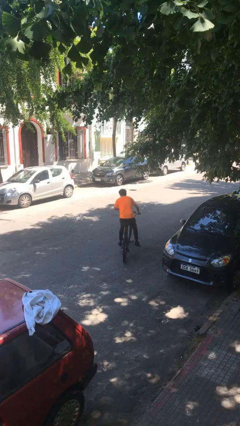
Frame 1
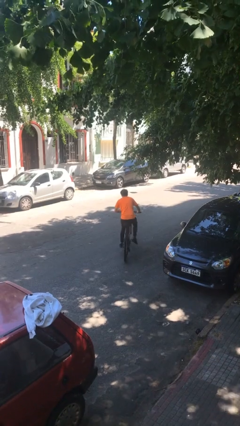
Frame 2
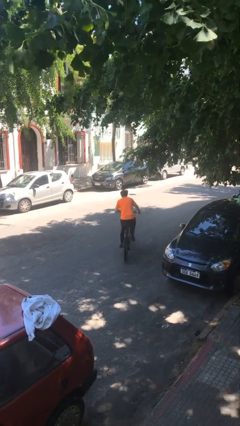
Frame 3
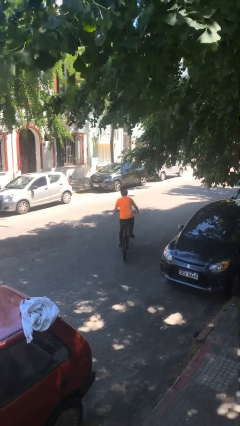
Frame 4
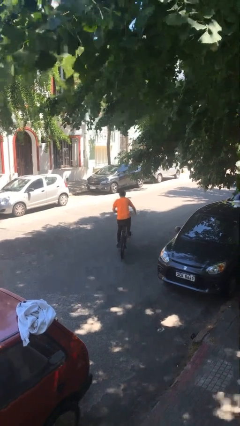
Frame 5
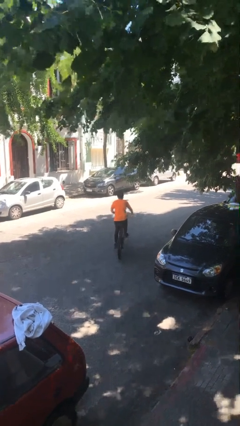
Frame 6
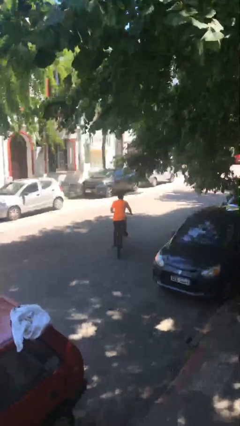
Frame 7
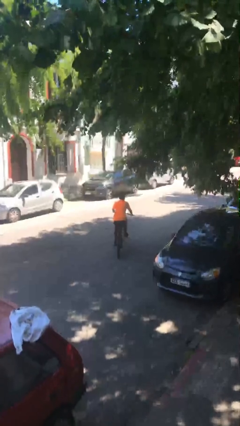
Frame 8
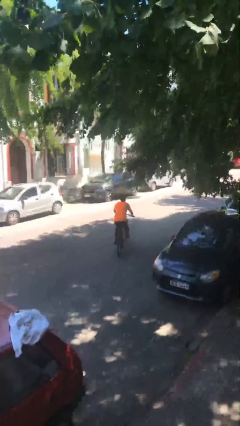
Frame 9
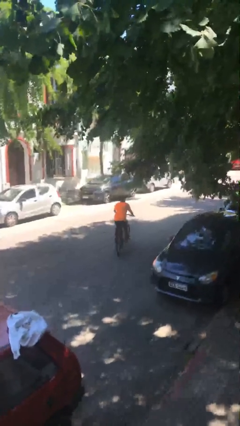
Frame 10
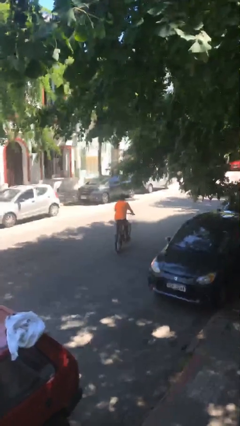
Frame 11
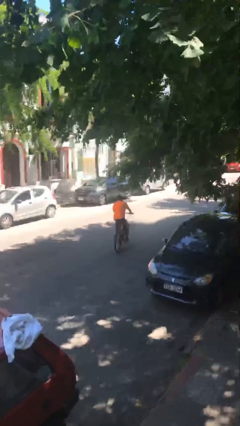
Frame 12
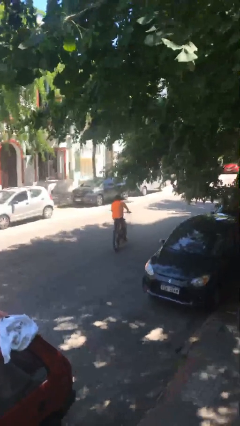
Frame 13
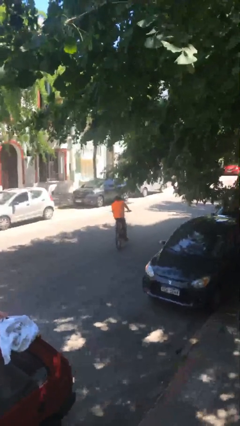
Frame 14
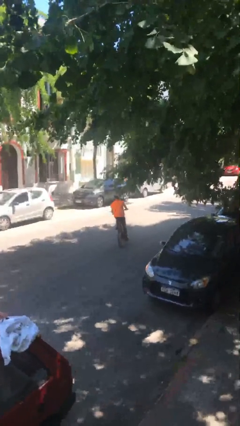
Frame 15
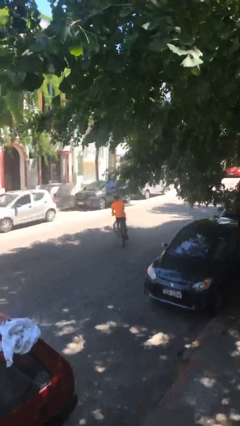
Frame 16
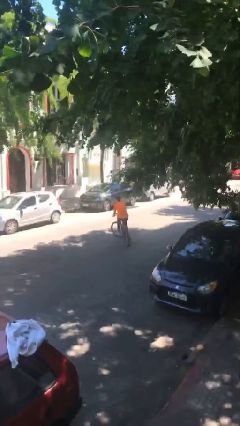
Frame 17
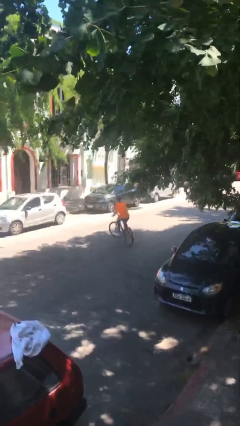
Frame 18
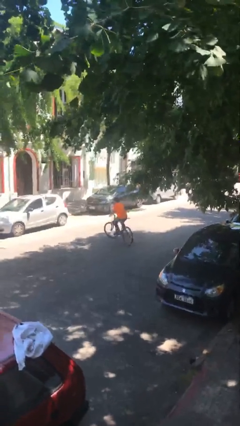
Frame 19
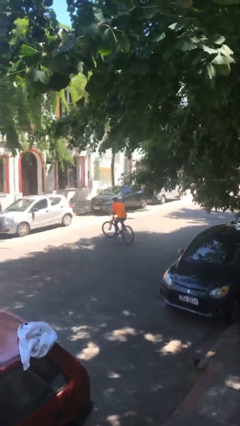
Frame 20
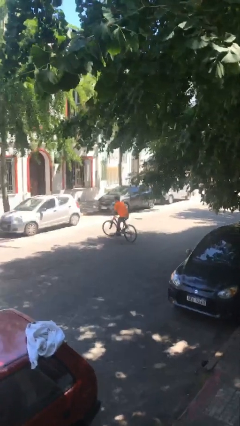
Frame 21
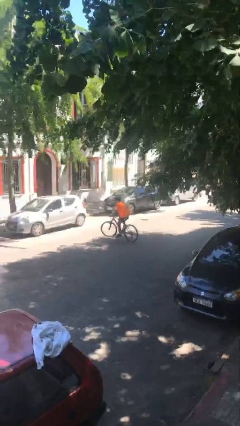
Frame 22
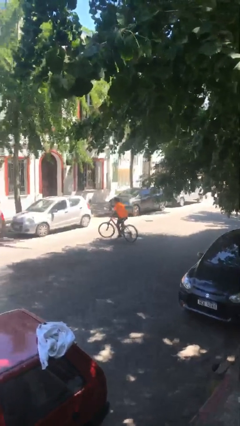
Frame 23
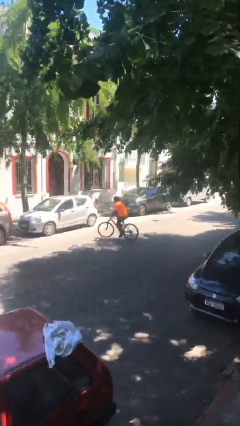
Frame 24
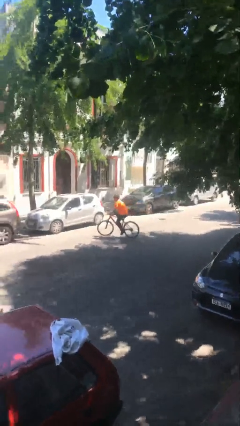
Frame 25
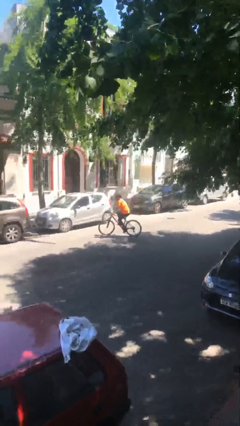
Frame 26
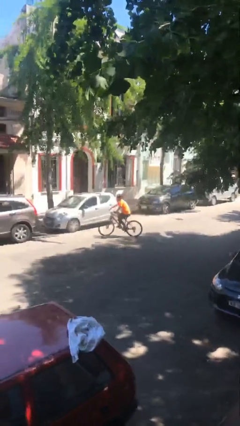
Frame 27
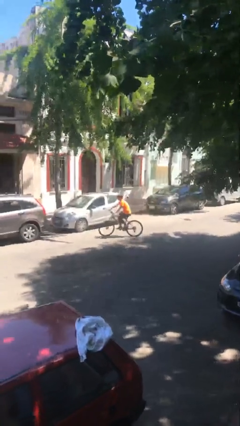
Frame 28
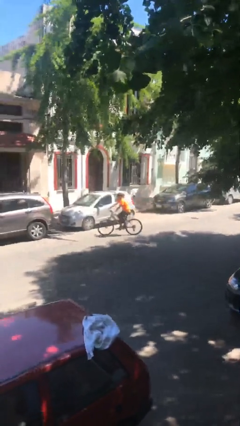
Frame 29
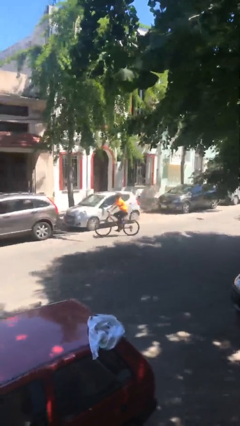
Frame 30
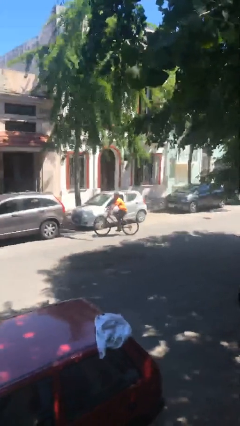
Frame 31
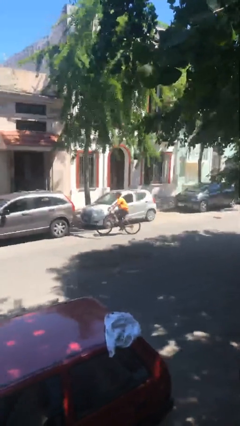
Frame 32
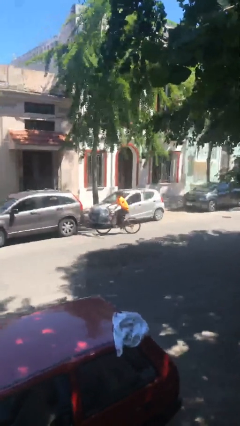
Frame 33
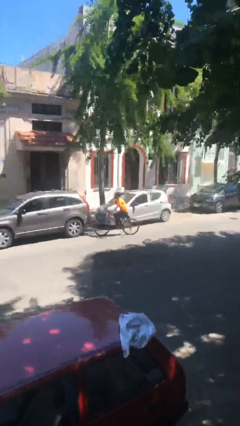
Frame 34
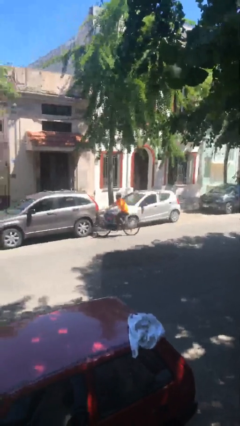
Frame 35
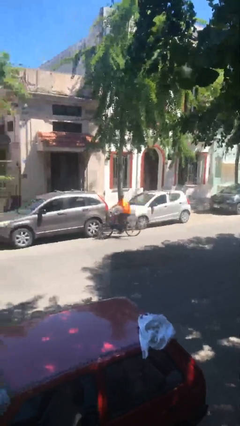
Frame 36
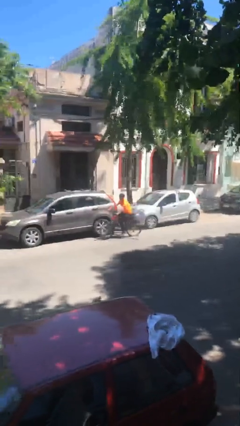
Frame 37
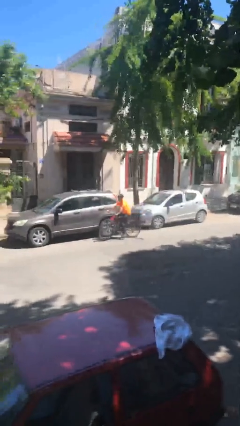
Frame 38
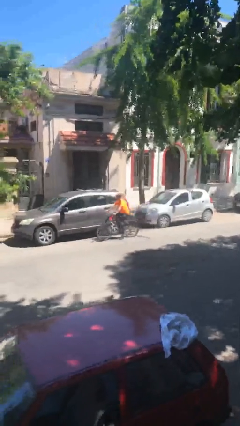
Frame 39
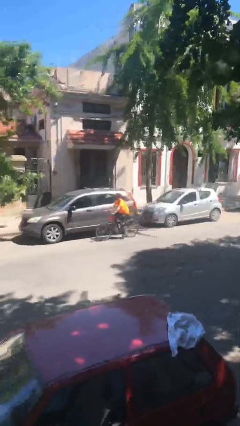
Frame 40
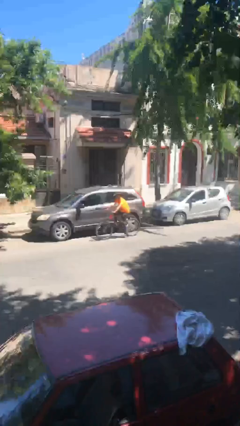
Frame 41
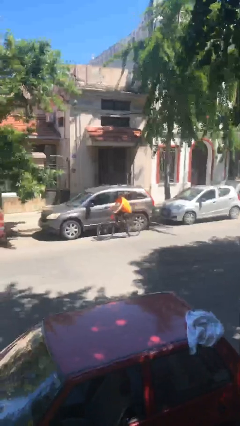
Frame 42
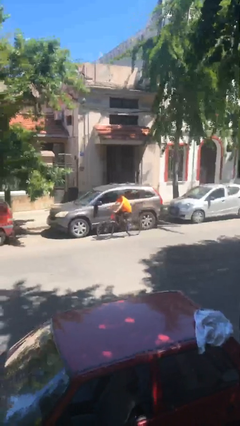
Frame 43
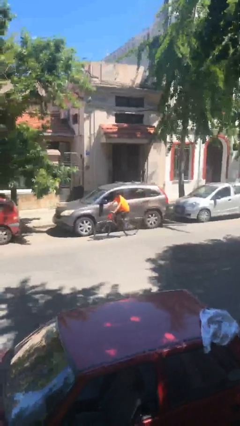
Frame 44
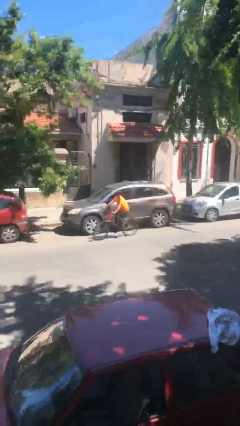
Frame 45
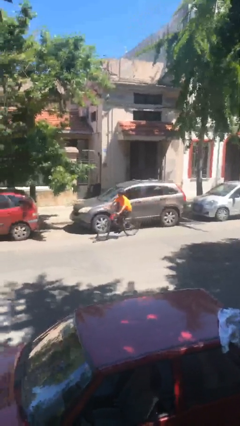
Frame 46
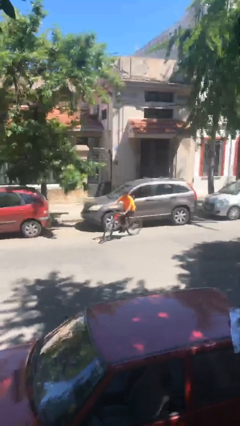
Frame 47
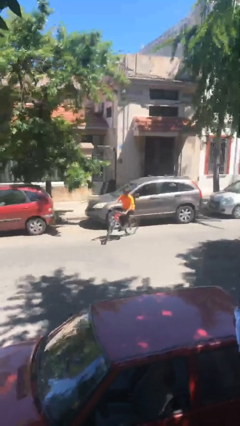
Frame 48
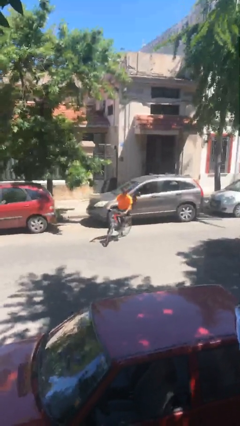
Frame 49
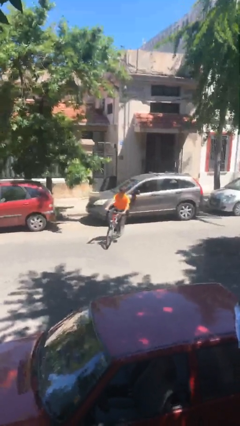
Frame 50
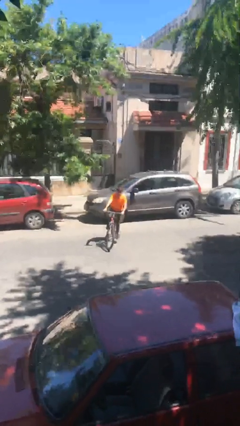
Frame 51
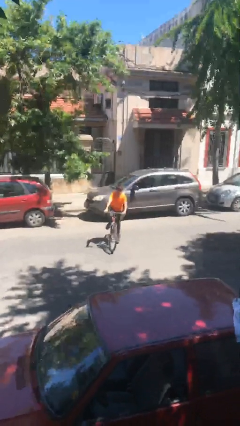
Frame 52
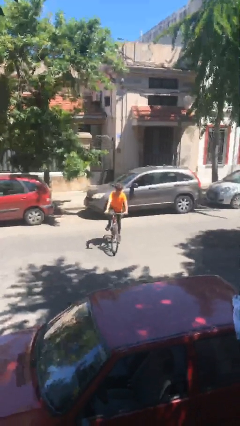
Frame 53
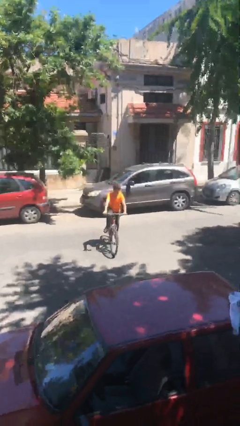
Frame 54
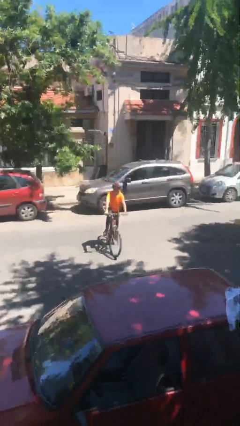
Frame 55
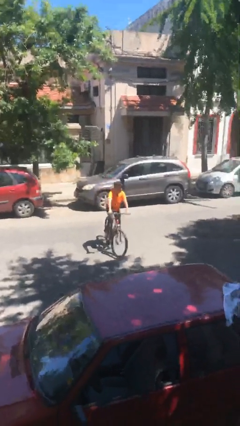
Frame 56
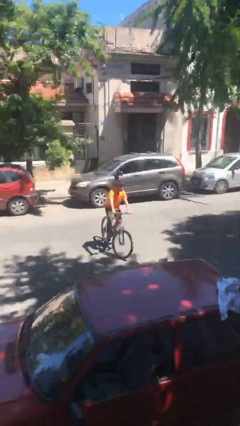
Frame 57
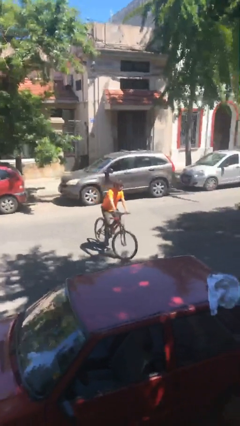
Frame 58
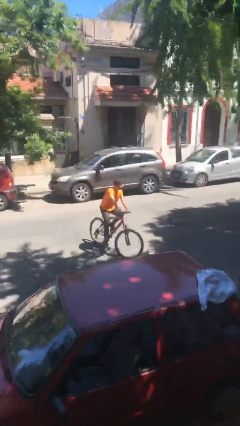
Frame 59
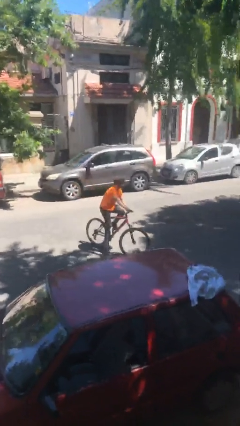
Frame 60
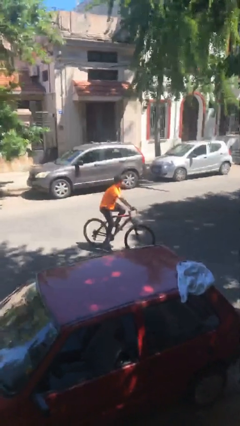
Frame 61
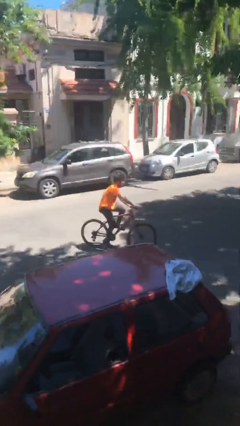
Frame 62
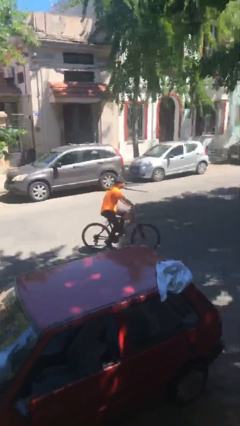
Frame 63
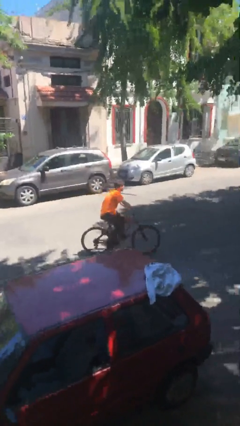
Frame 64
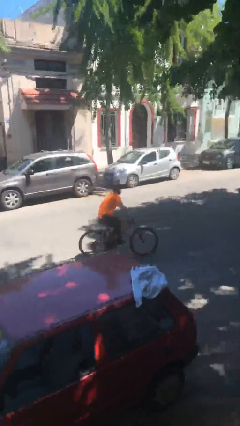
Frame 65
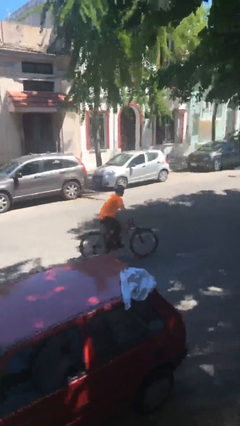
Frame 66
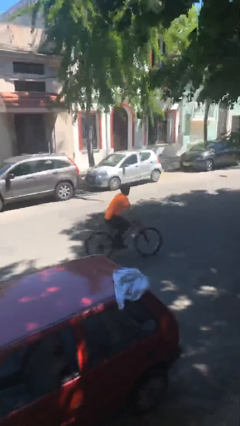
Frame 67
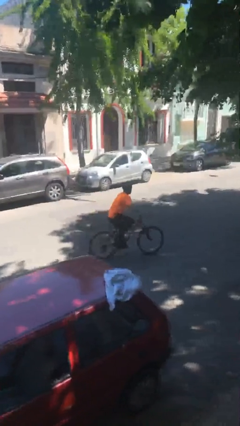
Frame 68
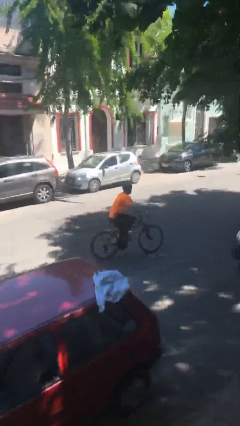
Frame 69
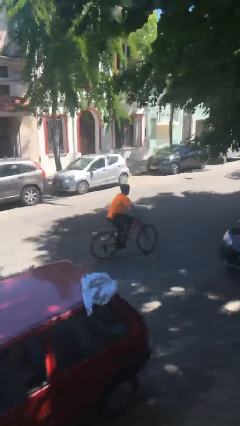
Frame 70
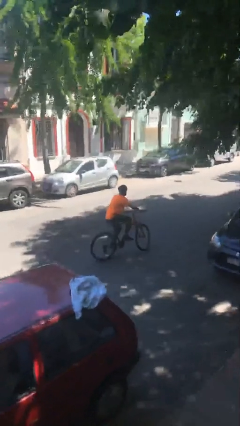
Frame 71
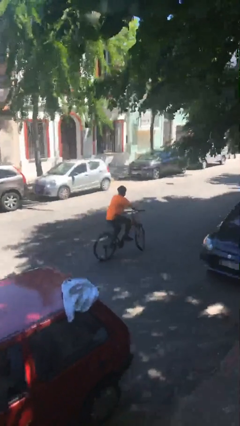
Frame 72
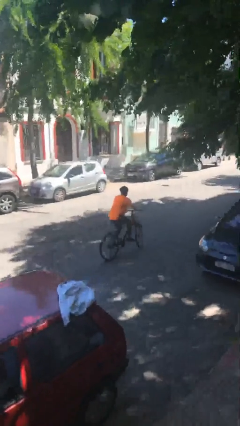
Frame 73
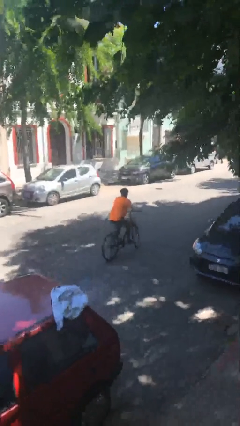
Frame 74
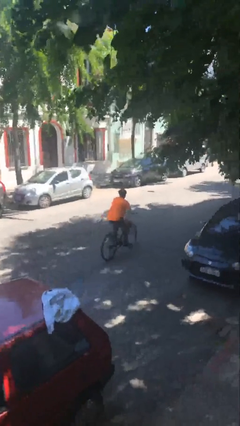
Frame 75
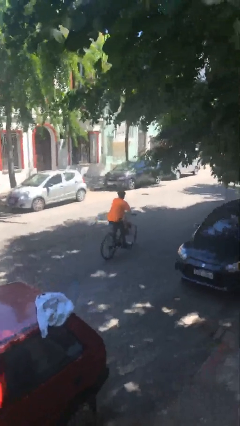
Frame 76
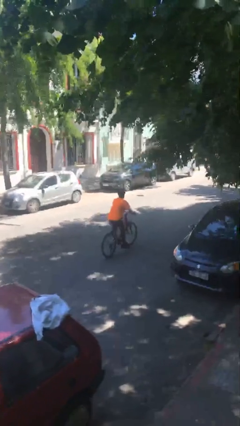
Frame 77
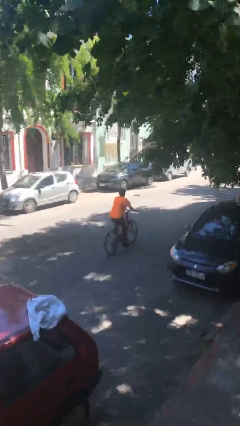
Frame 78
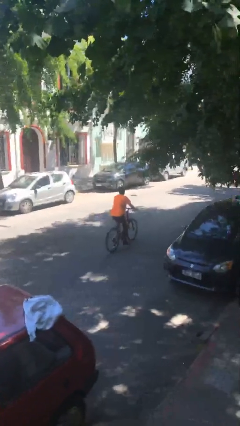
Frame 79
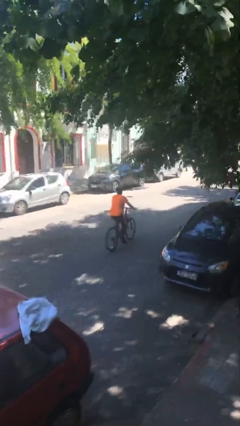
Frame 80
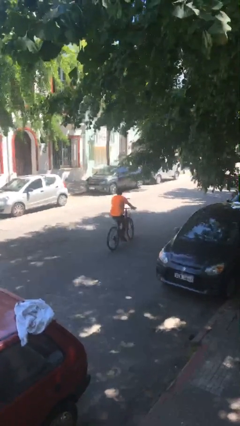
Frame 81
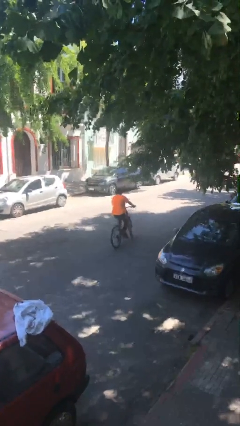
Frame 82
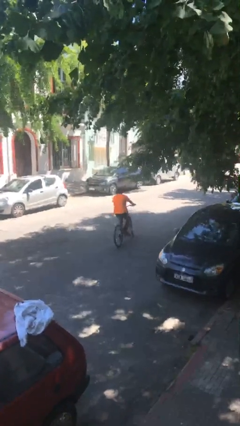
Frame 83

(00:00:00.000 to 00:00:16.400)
person rides bicycle

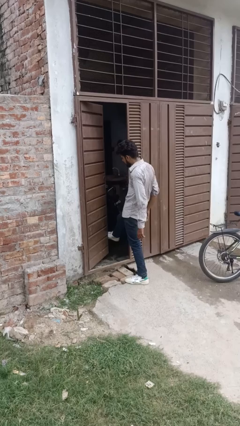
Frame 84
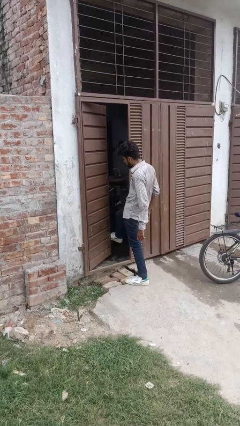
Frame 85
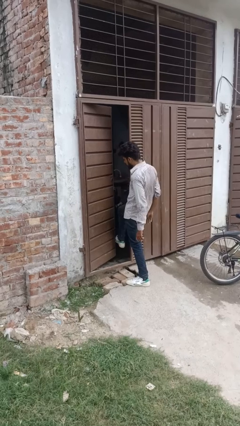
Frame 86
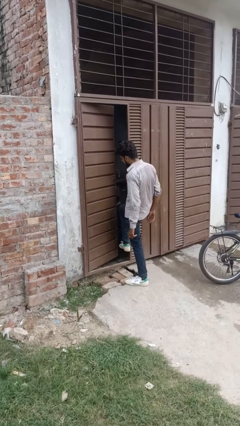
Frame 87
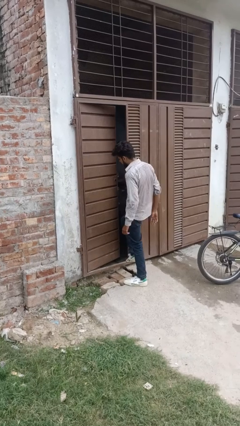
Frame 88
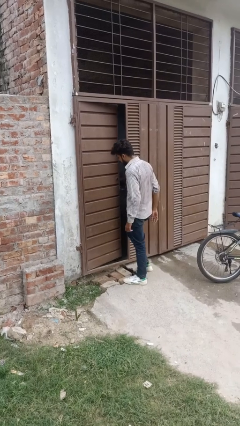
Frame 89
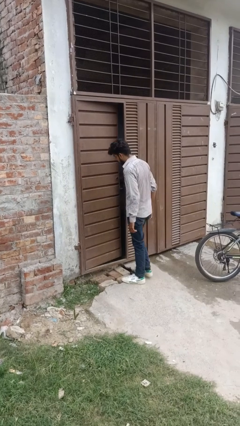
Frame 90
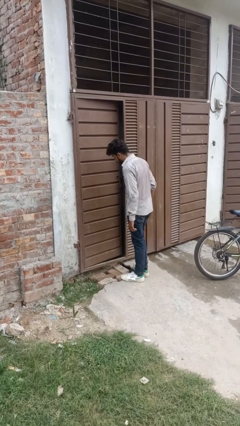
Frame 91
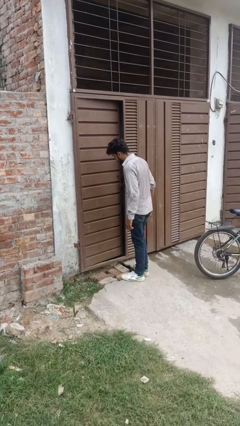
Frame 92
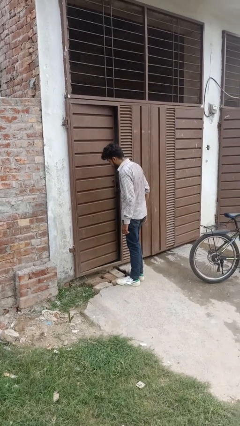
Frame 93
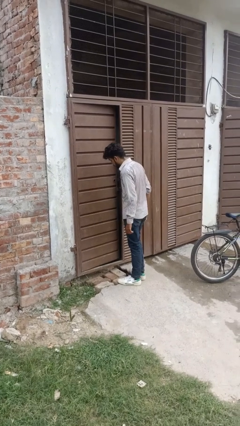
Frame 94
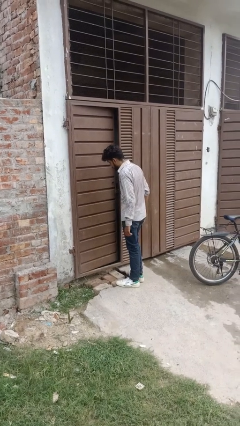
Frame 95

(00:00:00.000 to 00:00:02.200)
person closes door with foot
